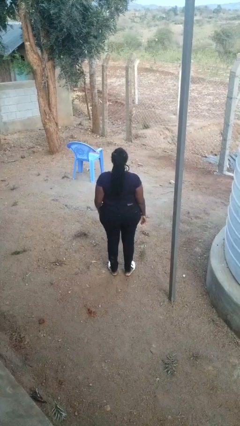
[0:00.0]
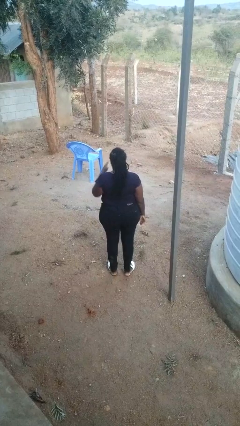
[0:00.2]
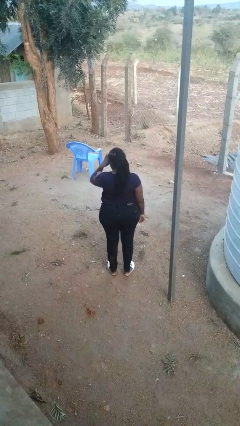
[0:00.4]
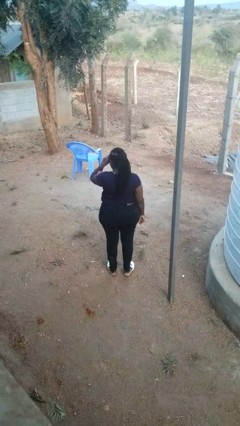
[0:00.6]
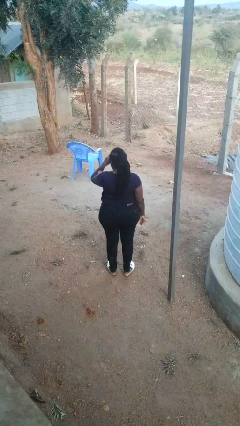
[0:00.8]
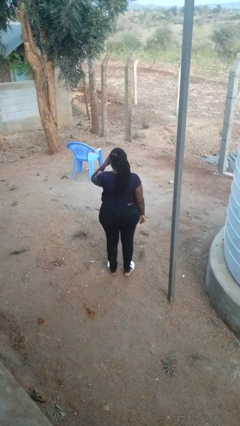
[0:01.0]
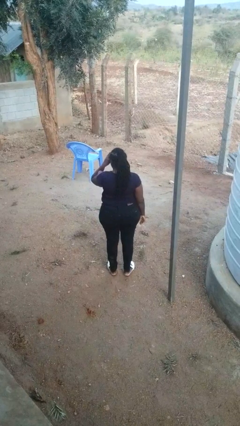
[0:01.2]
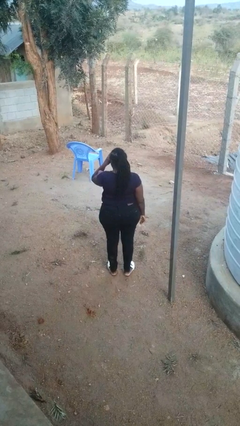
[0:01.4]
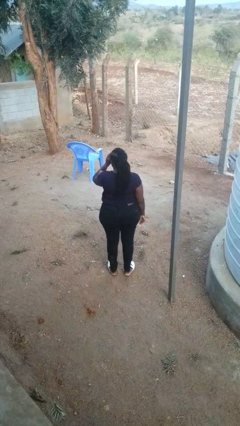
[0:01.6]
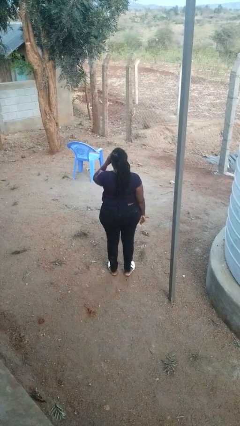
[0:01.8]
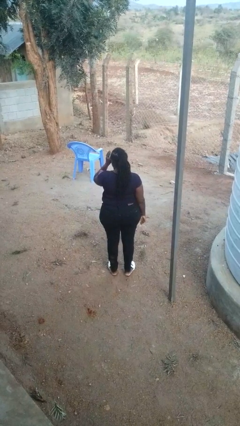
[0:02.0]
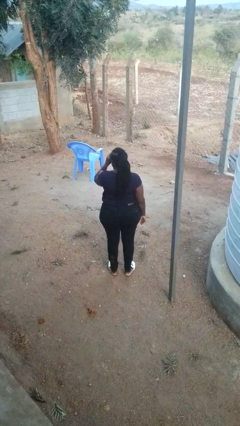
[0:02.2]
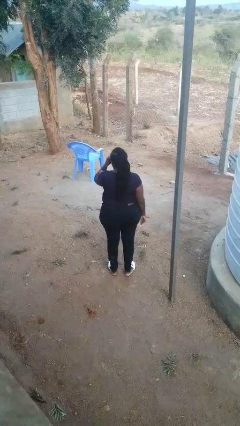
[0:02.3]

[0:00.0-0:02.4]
person rubs eyes

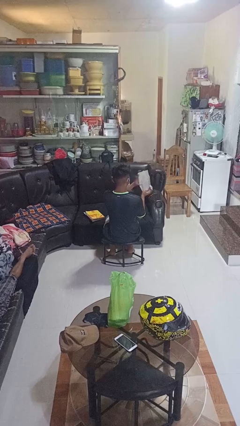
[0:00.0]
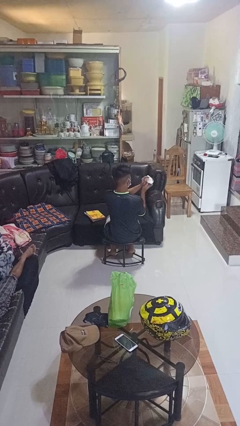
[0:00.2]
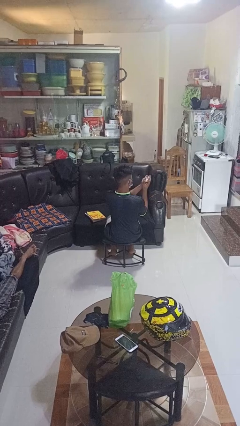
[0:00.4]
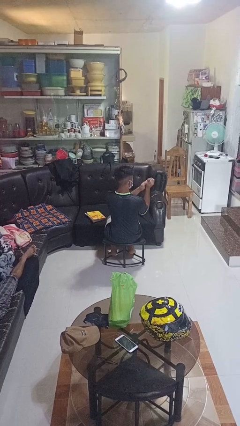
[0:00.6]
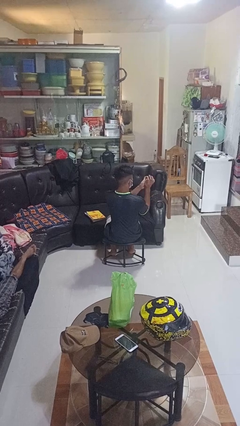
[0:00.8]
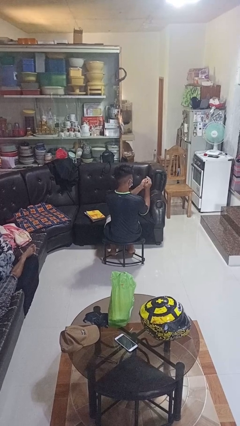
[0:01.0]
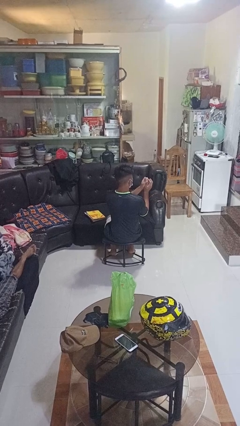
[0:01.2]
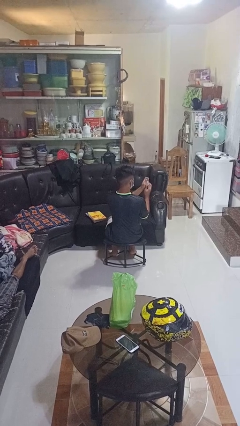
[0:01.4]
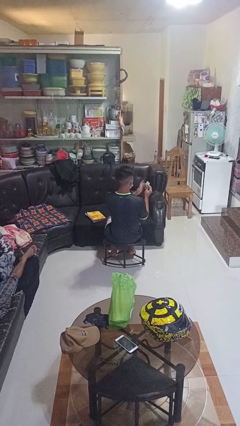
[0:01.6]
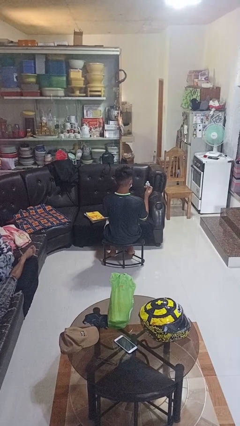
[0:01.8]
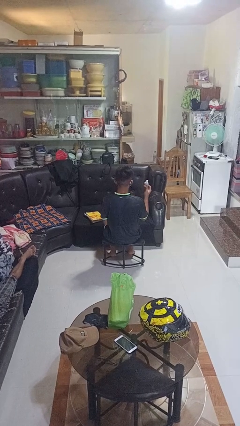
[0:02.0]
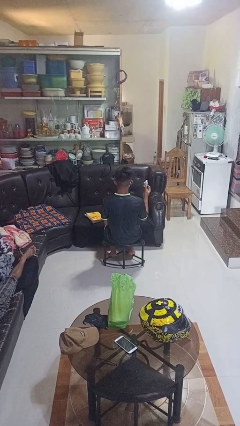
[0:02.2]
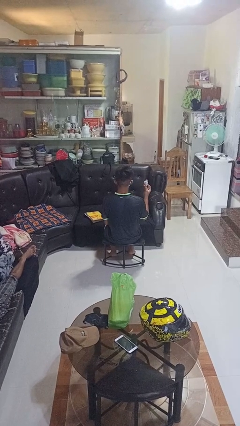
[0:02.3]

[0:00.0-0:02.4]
person crumples paper

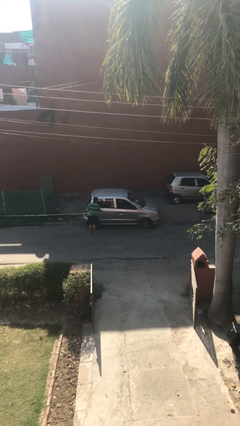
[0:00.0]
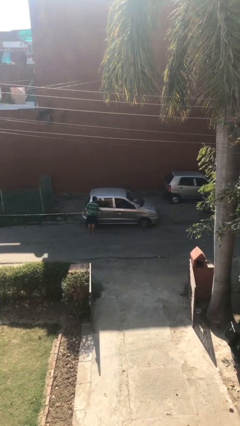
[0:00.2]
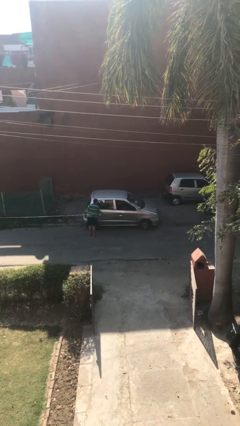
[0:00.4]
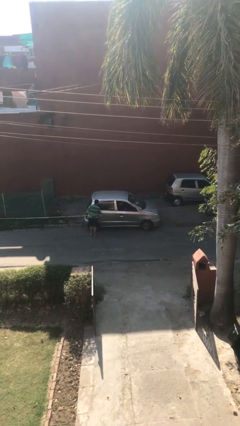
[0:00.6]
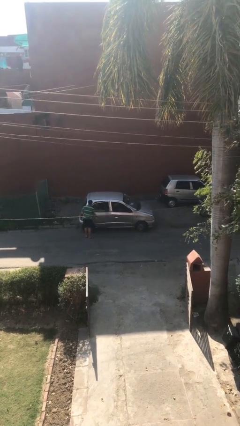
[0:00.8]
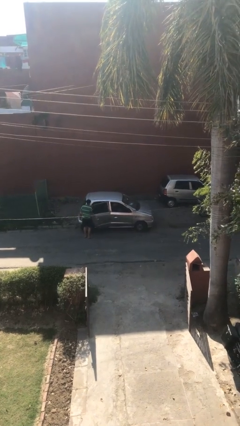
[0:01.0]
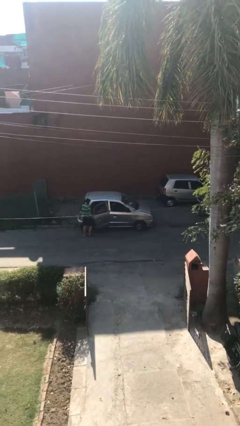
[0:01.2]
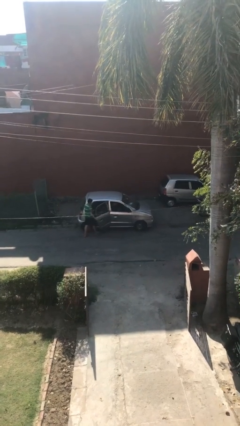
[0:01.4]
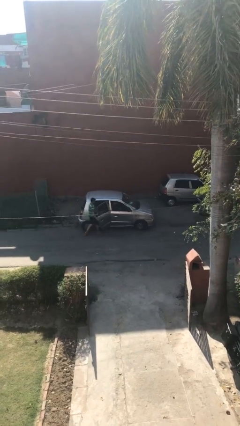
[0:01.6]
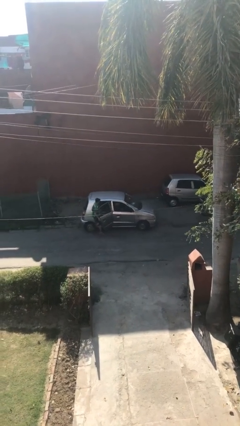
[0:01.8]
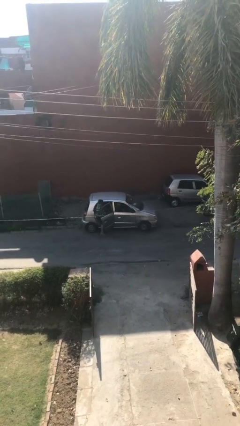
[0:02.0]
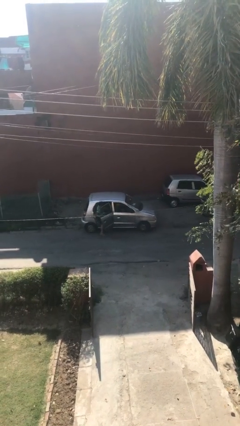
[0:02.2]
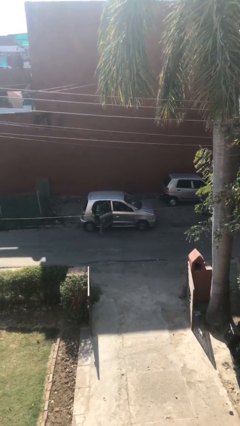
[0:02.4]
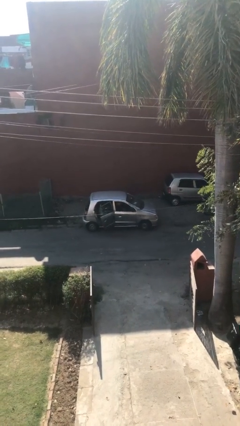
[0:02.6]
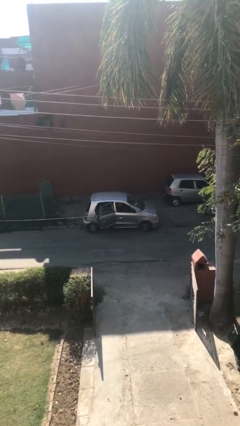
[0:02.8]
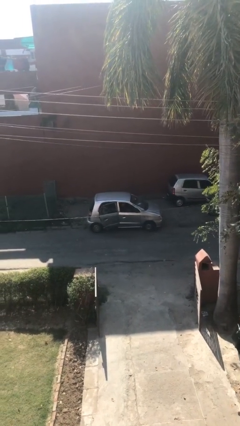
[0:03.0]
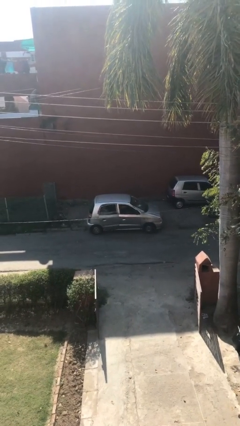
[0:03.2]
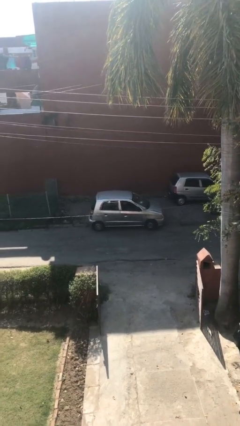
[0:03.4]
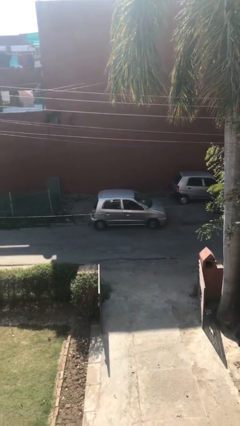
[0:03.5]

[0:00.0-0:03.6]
car picks up person

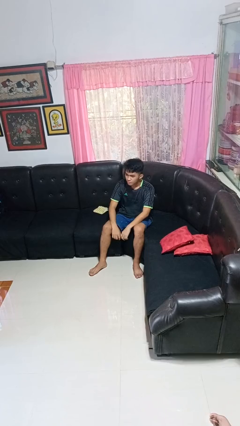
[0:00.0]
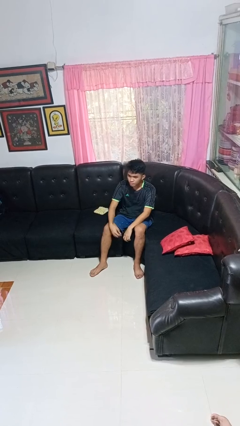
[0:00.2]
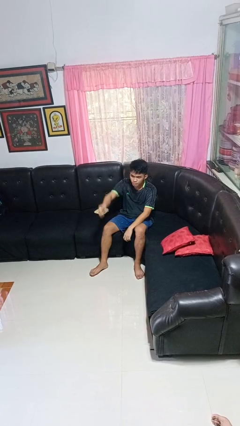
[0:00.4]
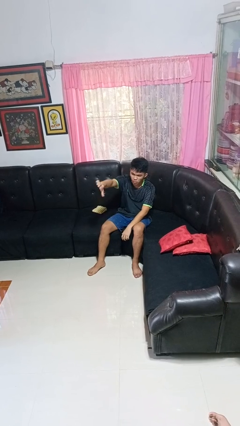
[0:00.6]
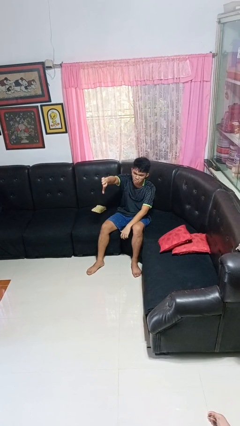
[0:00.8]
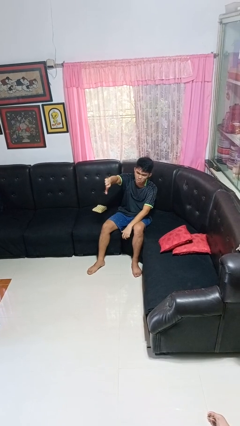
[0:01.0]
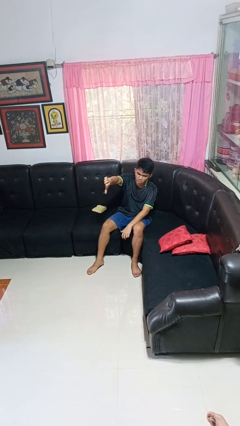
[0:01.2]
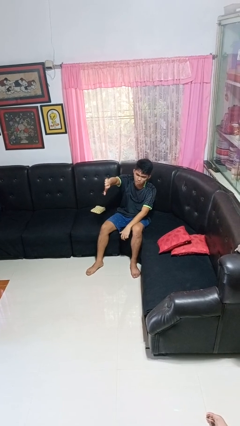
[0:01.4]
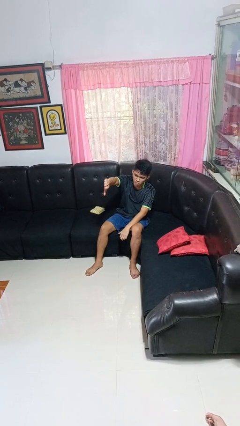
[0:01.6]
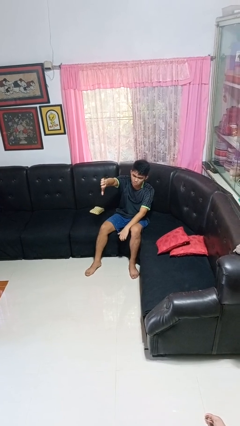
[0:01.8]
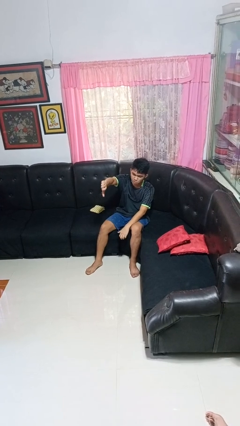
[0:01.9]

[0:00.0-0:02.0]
person gestures thumbs down

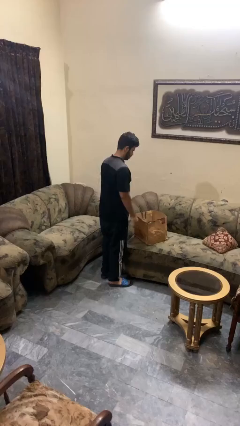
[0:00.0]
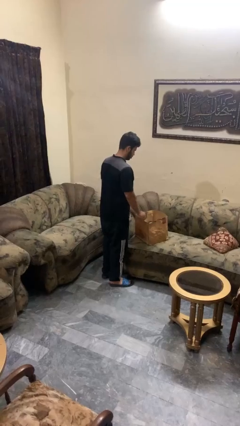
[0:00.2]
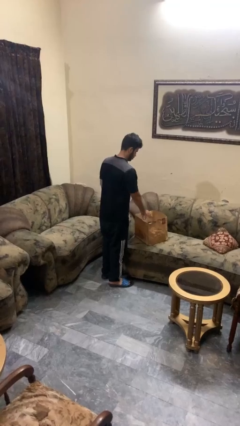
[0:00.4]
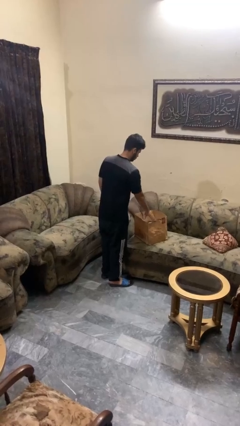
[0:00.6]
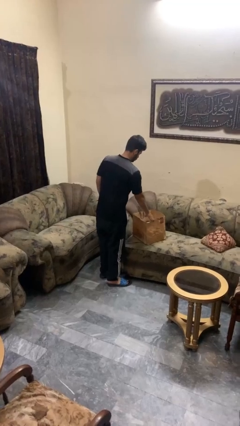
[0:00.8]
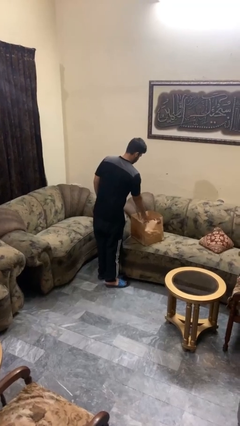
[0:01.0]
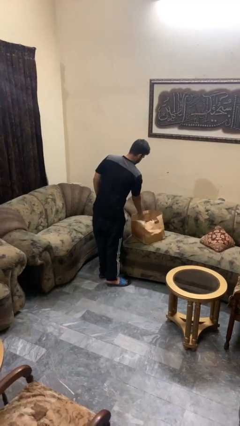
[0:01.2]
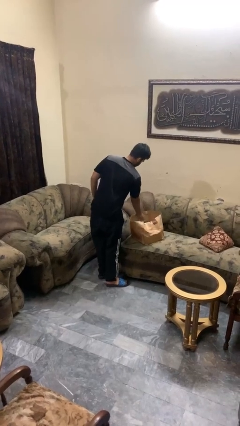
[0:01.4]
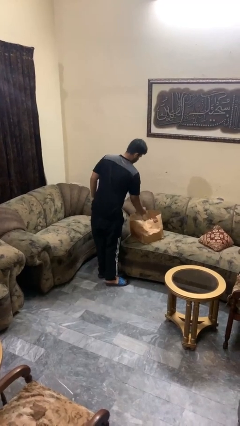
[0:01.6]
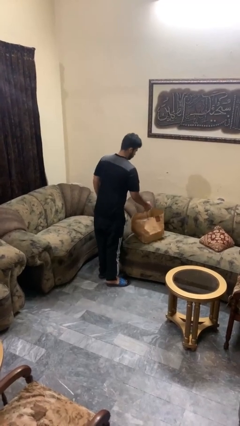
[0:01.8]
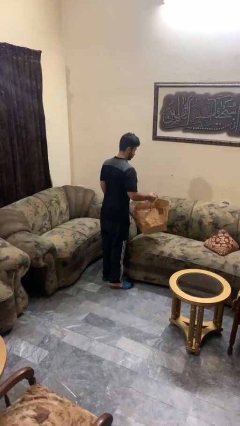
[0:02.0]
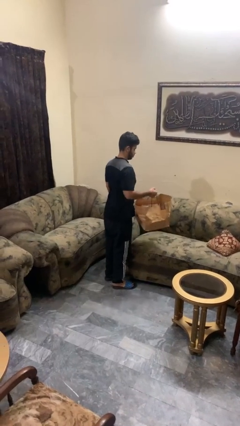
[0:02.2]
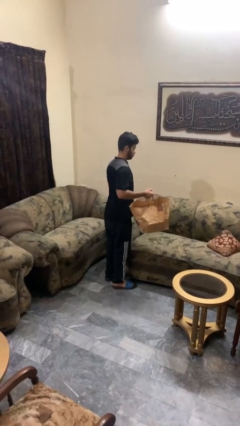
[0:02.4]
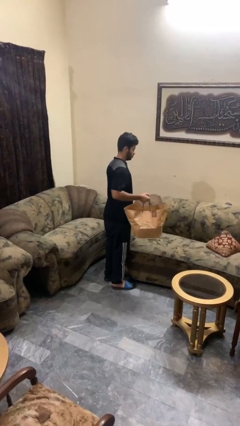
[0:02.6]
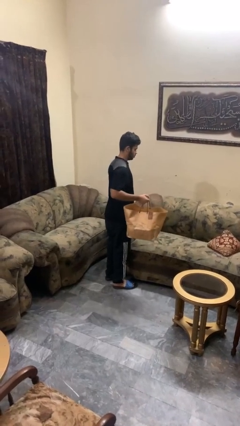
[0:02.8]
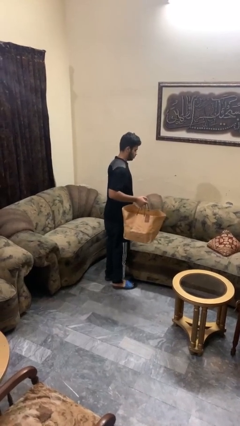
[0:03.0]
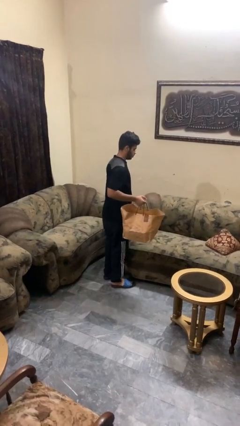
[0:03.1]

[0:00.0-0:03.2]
person picks up object from couch

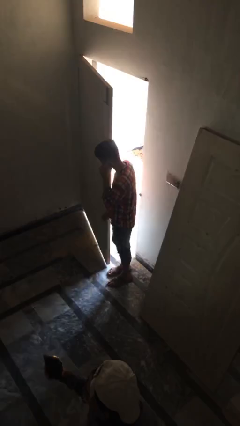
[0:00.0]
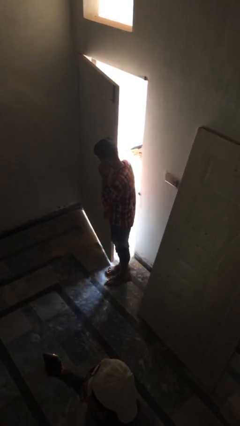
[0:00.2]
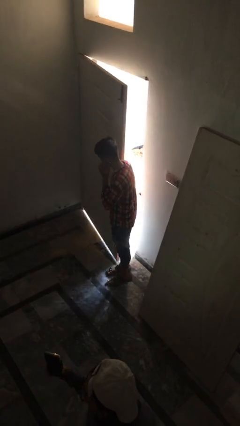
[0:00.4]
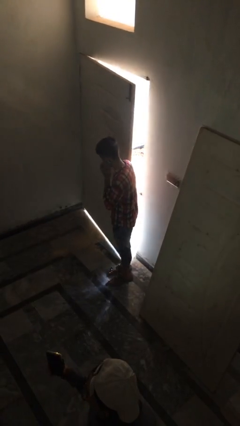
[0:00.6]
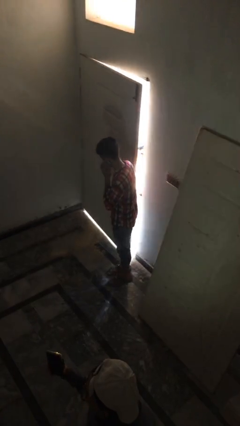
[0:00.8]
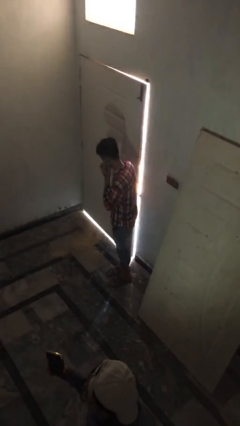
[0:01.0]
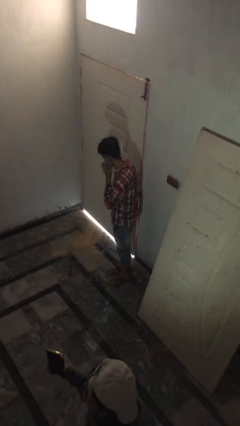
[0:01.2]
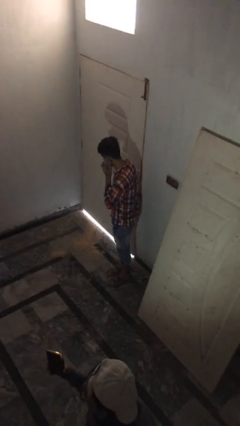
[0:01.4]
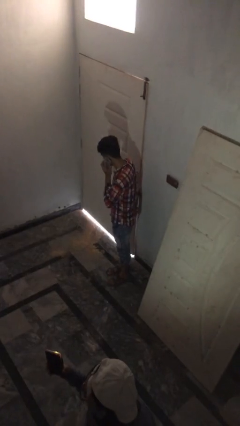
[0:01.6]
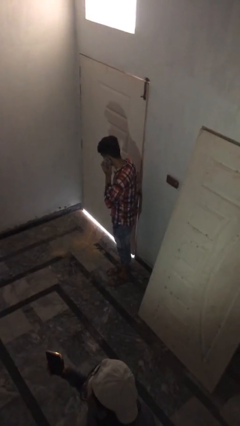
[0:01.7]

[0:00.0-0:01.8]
person closes facility door

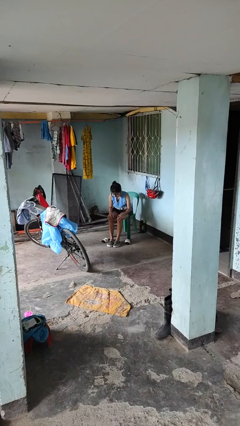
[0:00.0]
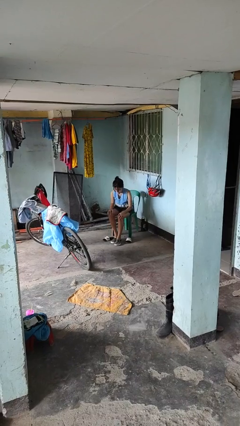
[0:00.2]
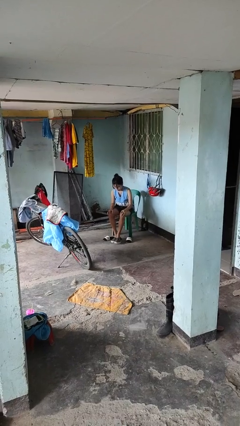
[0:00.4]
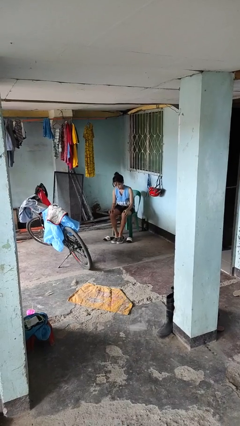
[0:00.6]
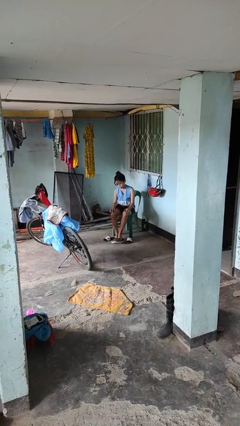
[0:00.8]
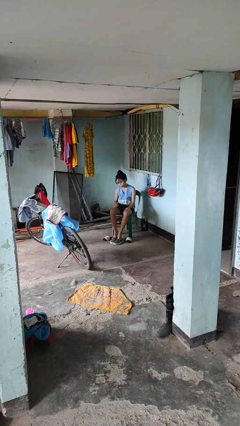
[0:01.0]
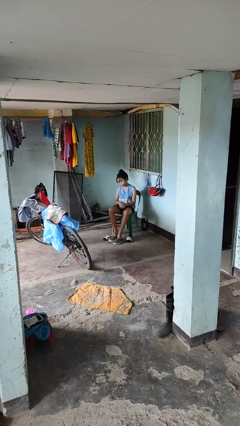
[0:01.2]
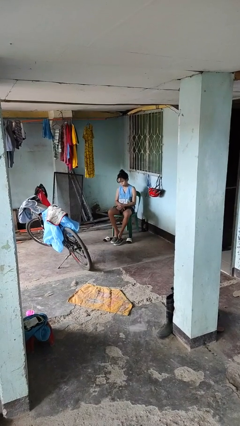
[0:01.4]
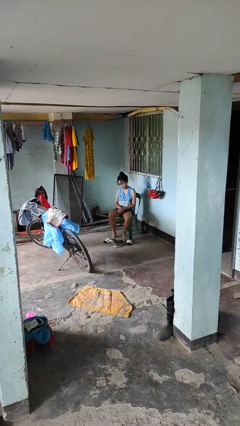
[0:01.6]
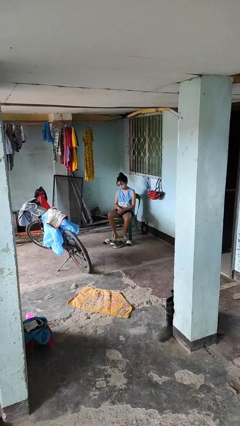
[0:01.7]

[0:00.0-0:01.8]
person takes off shoes
